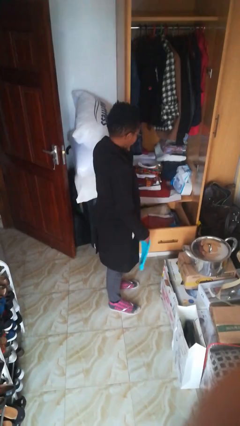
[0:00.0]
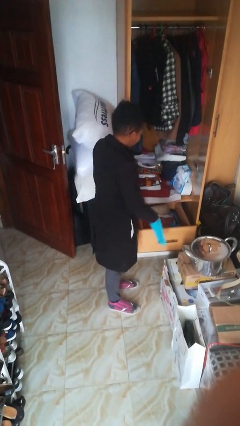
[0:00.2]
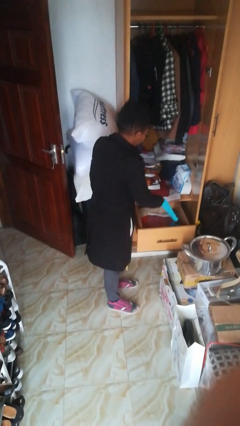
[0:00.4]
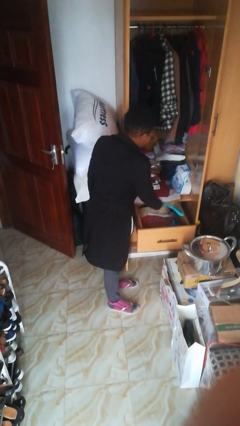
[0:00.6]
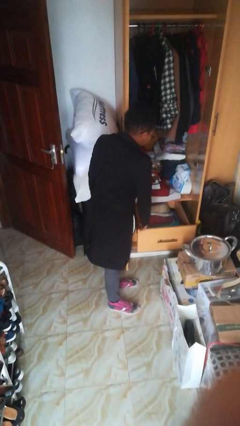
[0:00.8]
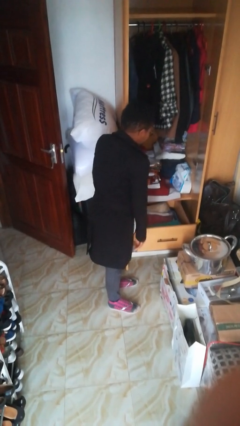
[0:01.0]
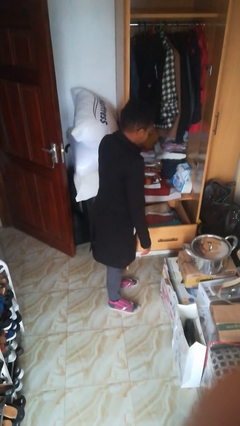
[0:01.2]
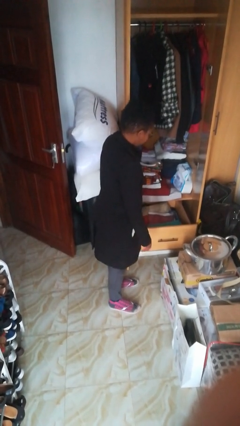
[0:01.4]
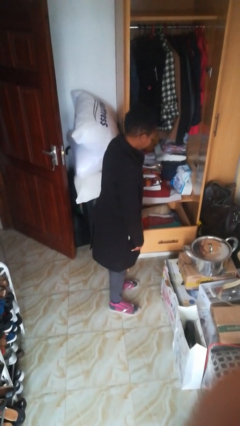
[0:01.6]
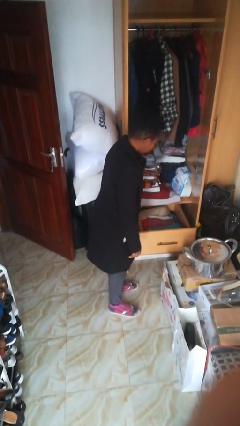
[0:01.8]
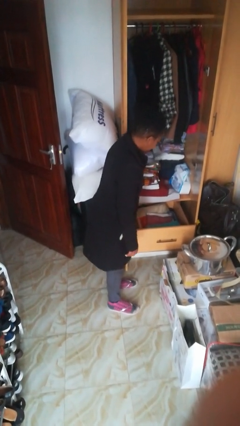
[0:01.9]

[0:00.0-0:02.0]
person puts clothes into dresser

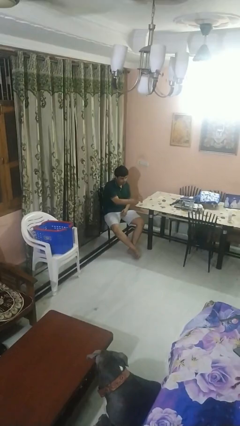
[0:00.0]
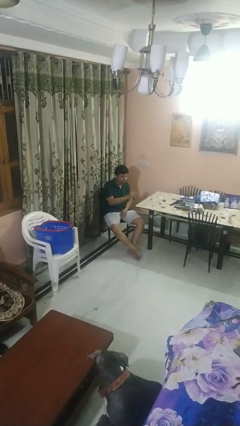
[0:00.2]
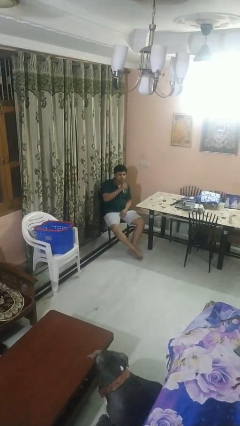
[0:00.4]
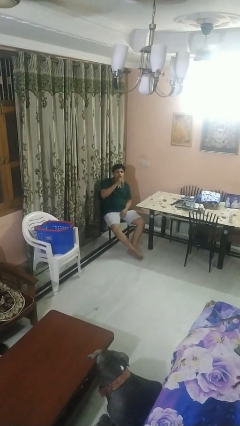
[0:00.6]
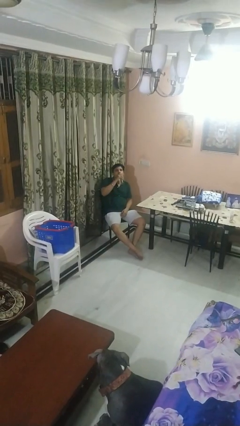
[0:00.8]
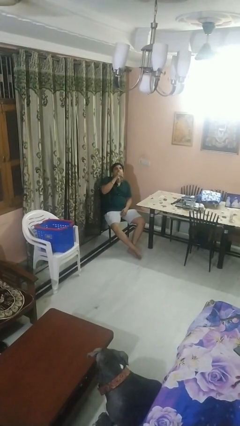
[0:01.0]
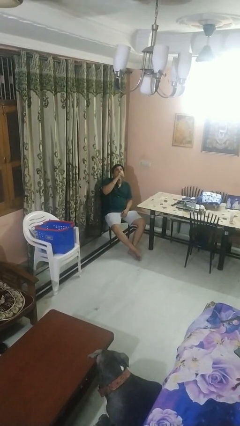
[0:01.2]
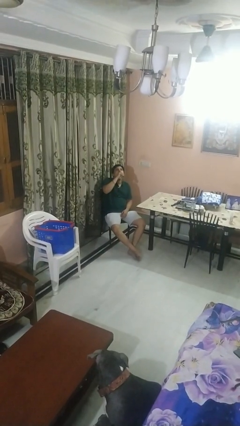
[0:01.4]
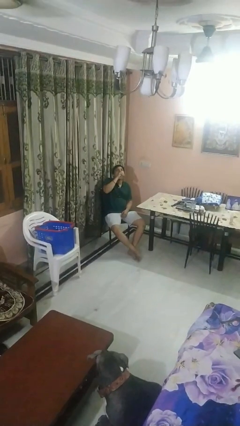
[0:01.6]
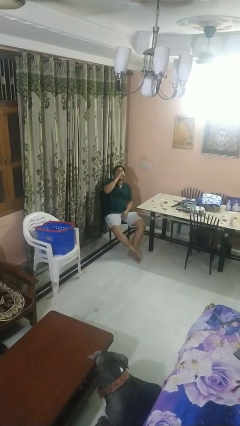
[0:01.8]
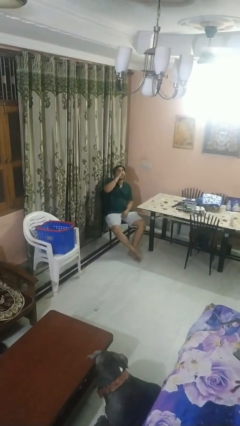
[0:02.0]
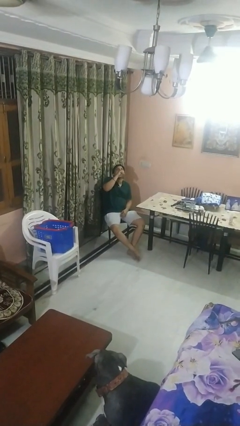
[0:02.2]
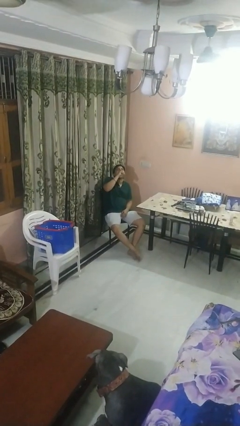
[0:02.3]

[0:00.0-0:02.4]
person drinks from bottle

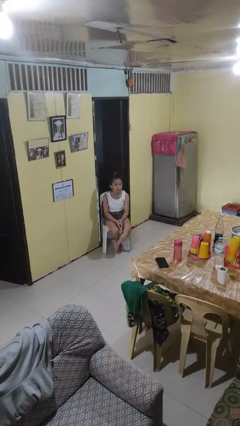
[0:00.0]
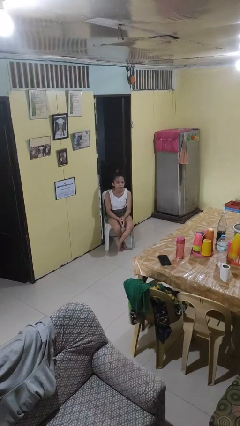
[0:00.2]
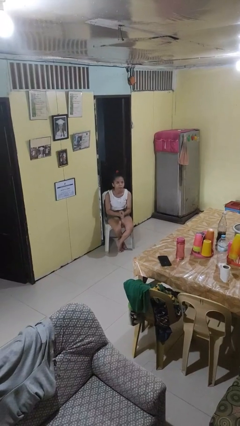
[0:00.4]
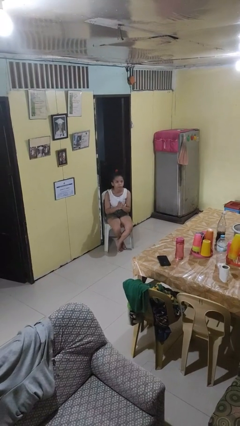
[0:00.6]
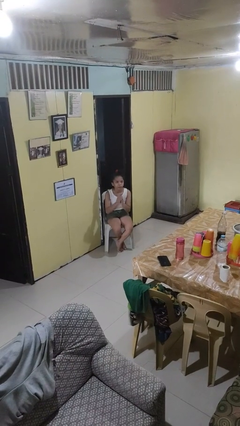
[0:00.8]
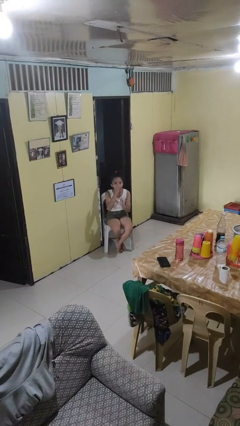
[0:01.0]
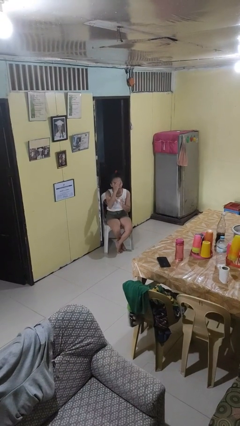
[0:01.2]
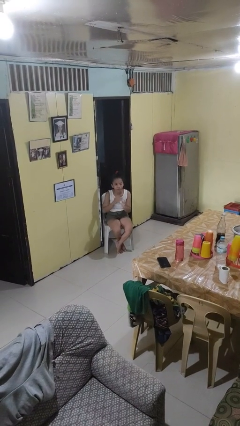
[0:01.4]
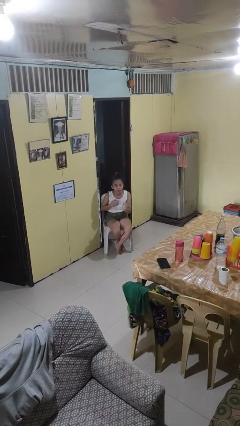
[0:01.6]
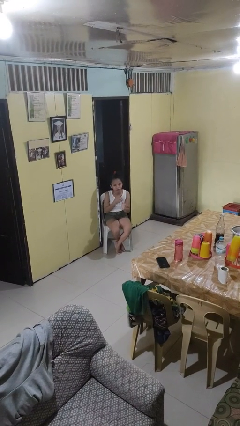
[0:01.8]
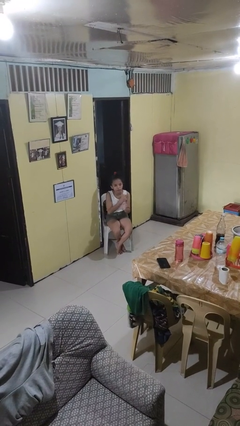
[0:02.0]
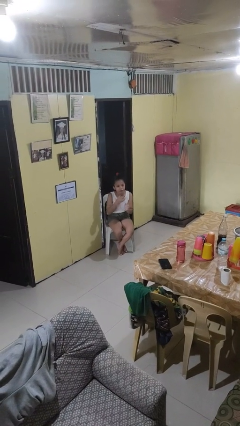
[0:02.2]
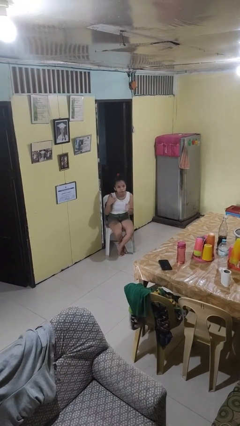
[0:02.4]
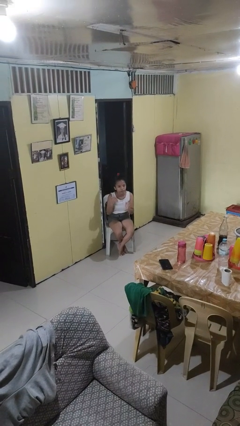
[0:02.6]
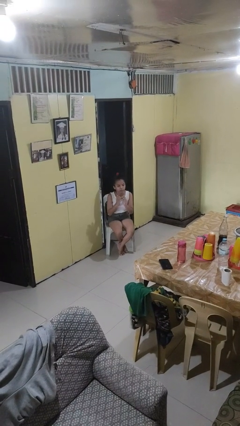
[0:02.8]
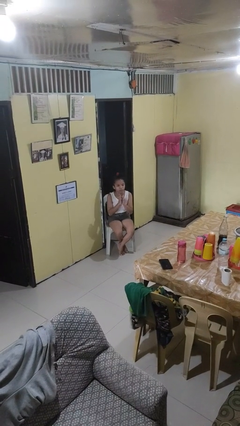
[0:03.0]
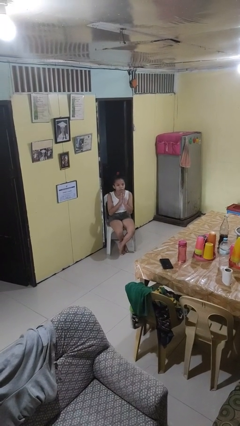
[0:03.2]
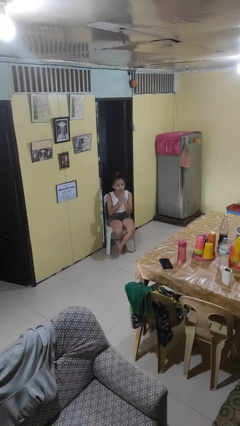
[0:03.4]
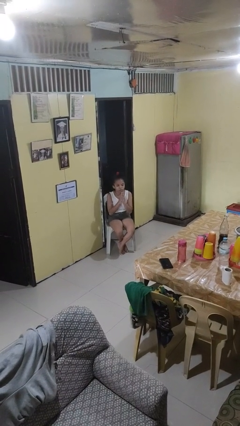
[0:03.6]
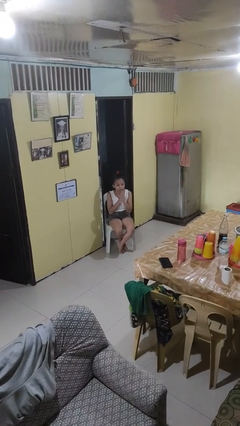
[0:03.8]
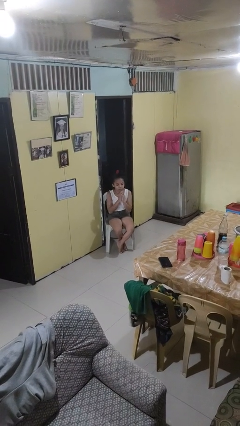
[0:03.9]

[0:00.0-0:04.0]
person prays

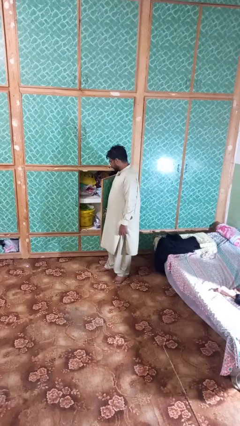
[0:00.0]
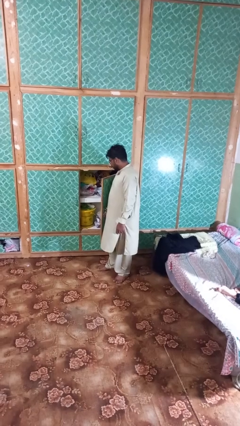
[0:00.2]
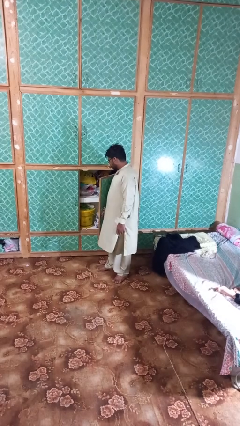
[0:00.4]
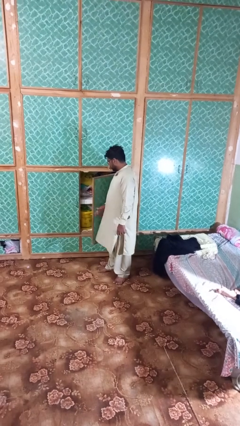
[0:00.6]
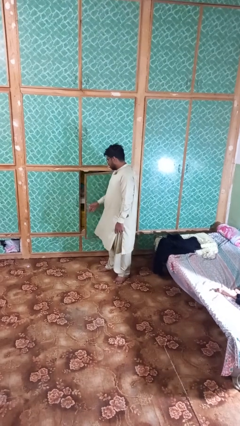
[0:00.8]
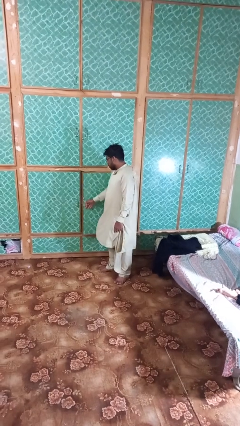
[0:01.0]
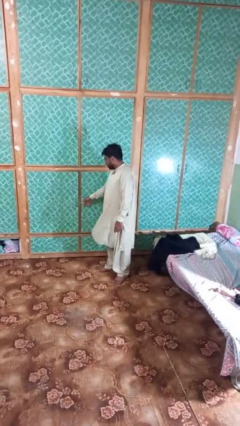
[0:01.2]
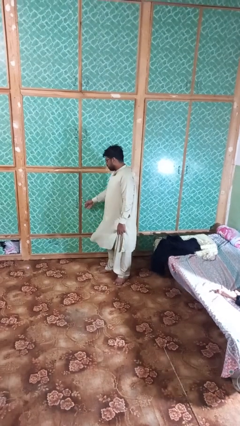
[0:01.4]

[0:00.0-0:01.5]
person closes closet door

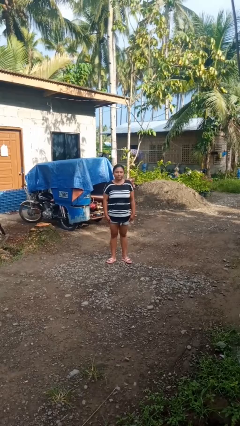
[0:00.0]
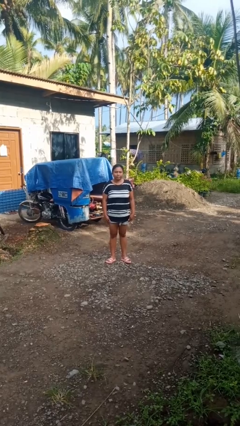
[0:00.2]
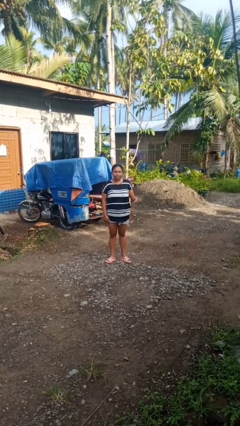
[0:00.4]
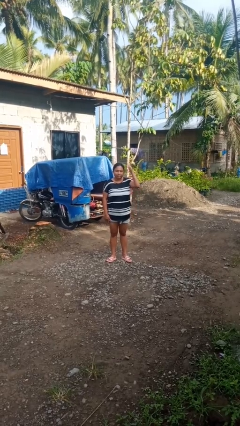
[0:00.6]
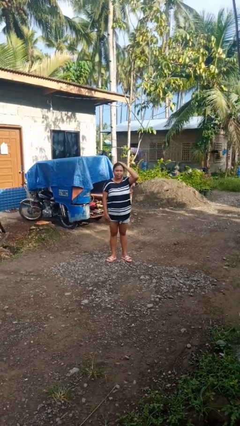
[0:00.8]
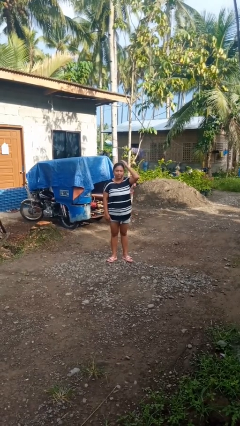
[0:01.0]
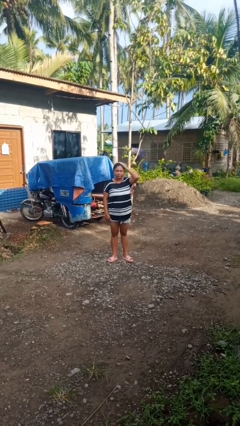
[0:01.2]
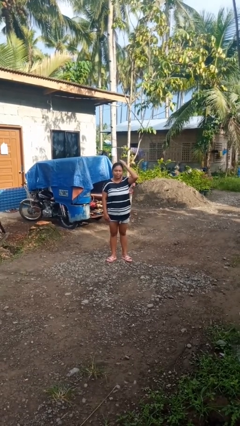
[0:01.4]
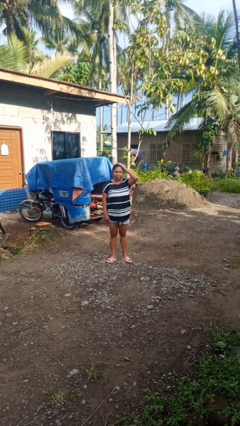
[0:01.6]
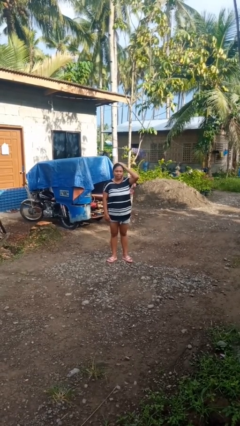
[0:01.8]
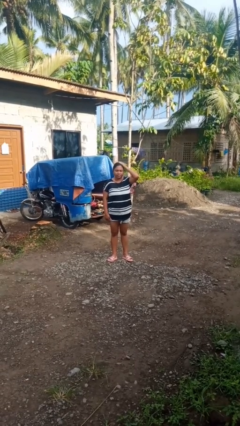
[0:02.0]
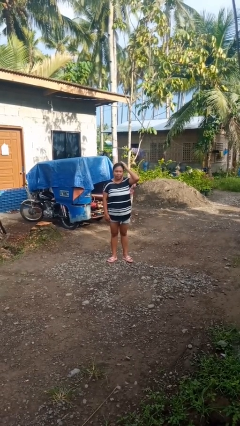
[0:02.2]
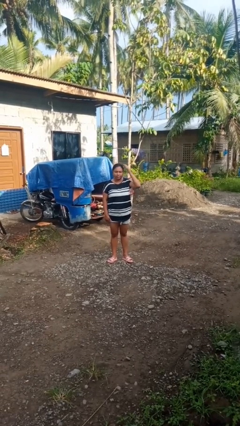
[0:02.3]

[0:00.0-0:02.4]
person pats head

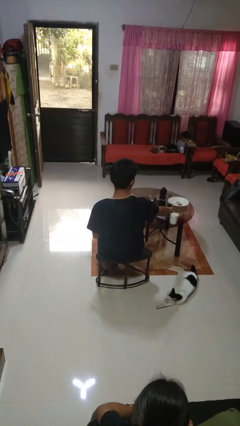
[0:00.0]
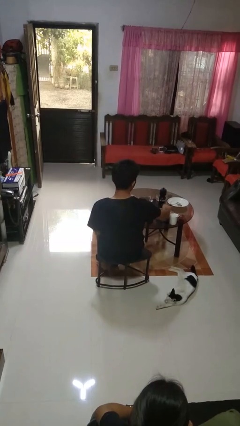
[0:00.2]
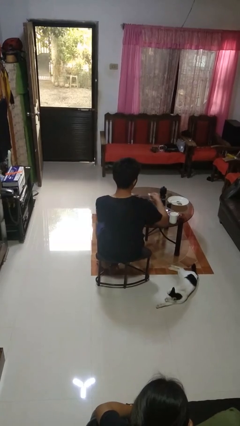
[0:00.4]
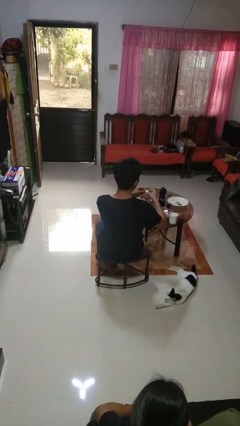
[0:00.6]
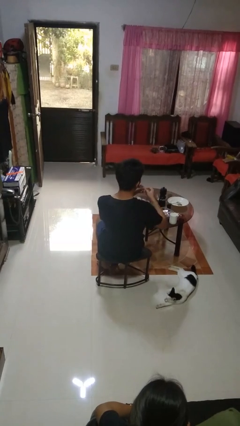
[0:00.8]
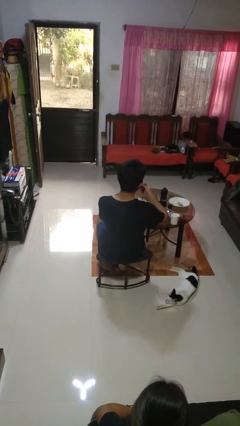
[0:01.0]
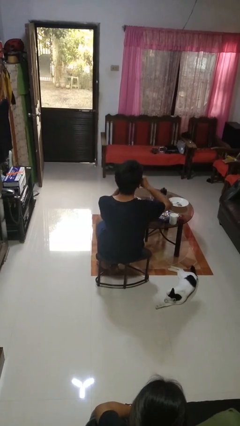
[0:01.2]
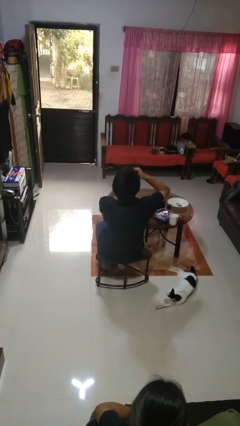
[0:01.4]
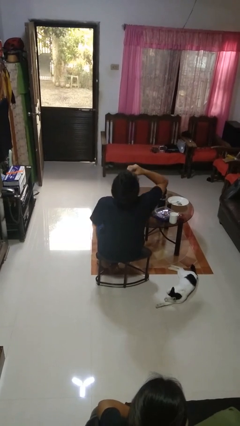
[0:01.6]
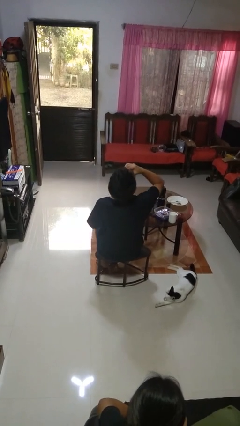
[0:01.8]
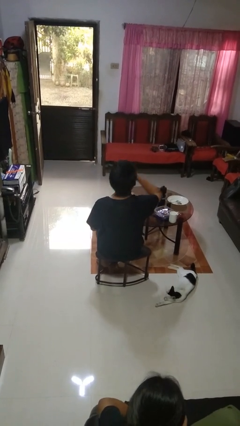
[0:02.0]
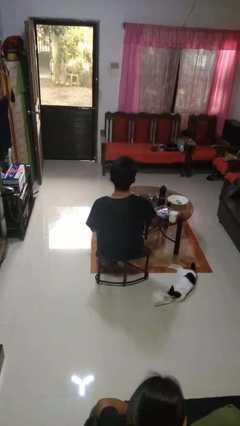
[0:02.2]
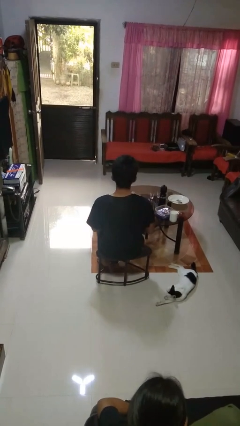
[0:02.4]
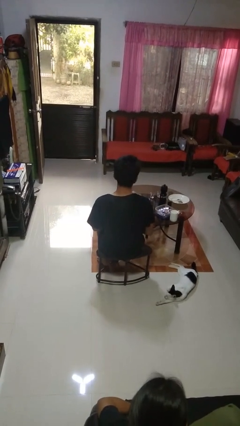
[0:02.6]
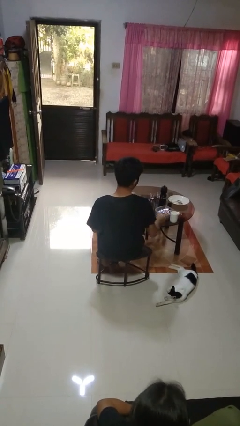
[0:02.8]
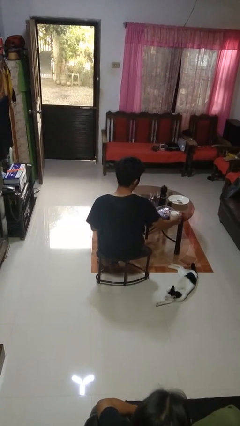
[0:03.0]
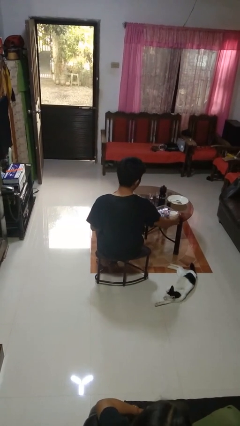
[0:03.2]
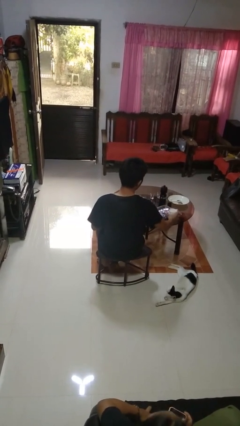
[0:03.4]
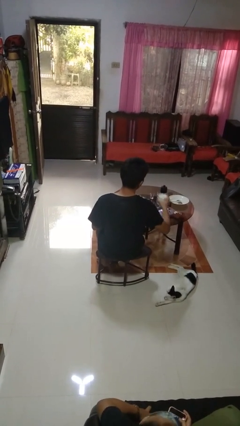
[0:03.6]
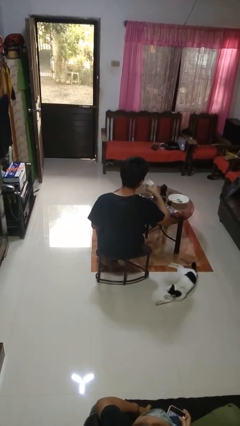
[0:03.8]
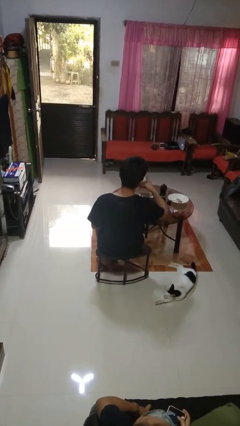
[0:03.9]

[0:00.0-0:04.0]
person takes medicine pills

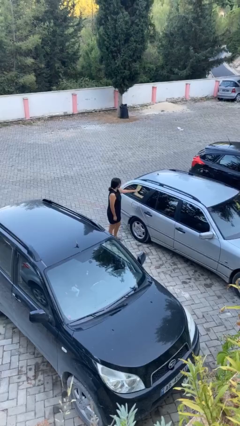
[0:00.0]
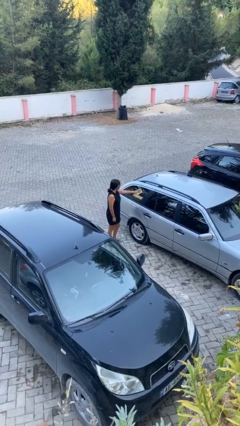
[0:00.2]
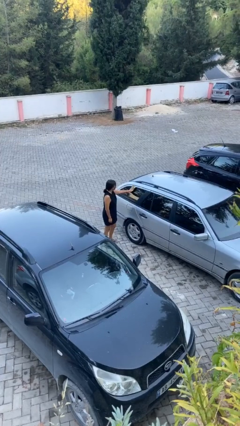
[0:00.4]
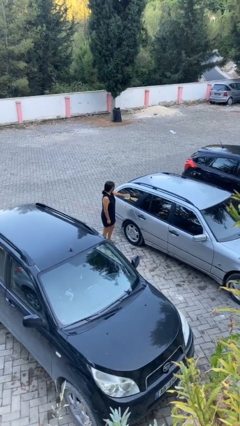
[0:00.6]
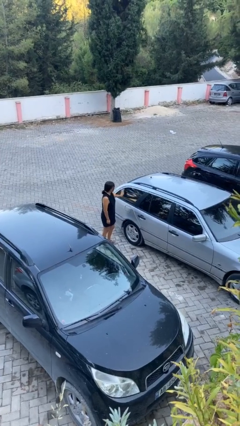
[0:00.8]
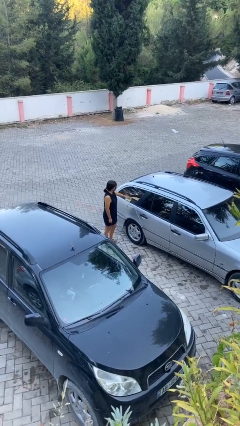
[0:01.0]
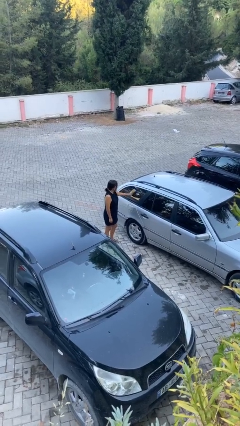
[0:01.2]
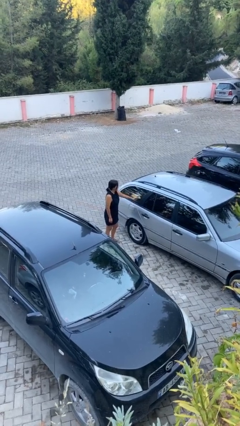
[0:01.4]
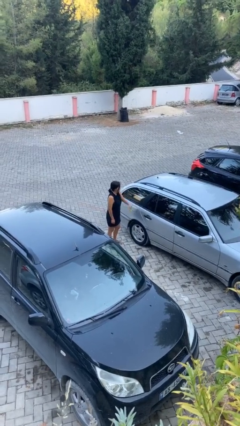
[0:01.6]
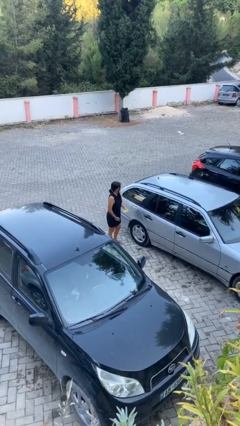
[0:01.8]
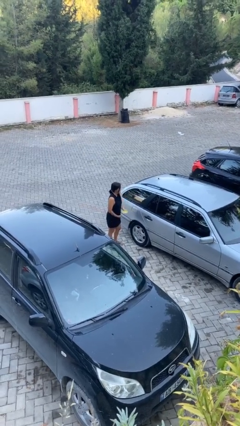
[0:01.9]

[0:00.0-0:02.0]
person polishes car with rag
